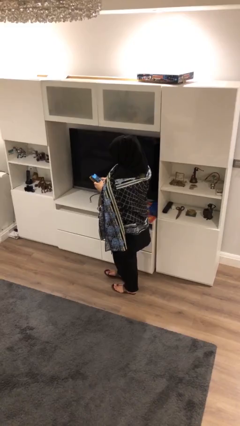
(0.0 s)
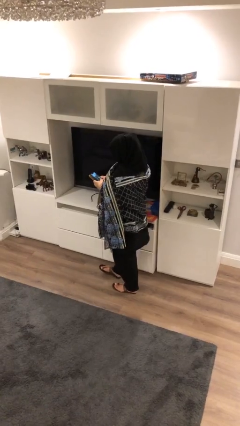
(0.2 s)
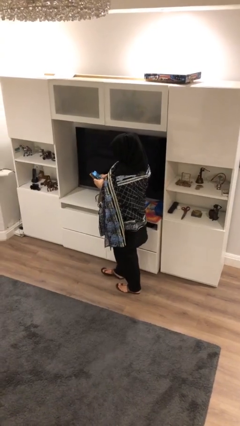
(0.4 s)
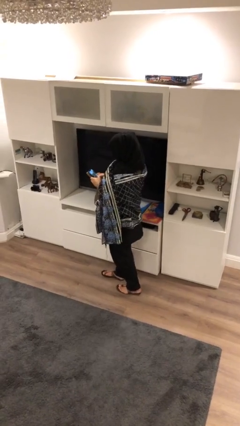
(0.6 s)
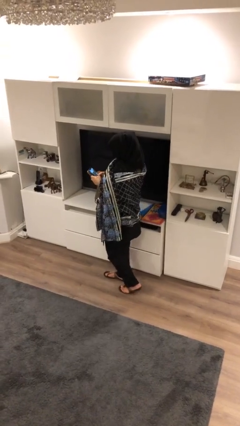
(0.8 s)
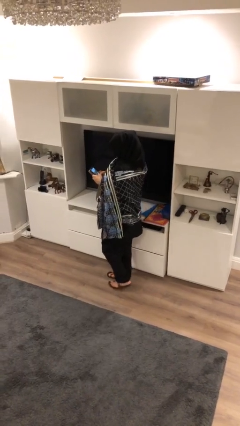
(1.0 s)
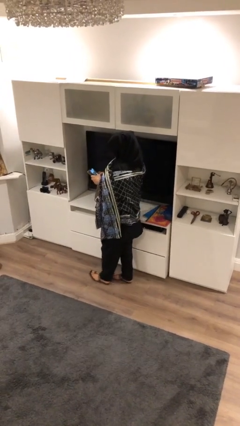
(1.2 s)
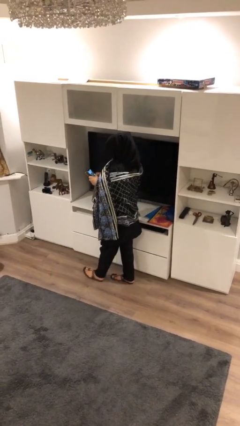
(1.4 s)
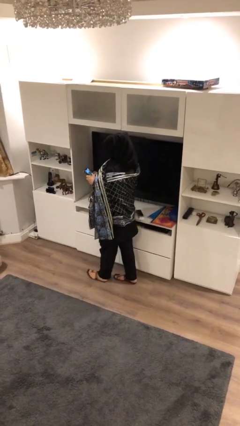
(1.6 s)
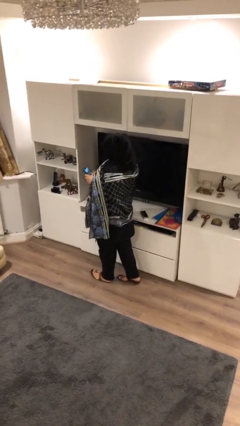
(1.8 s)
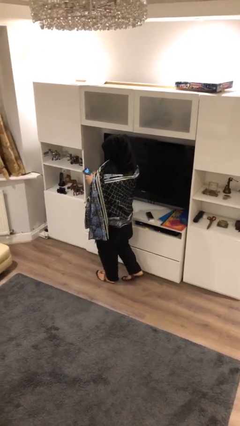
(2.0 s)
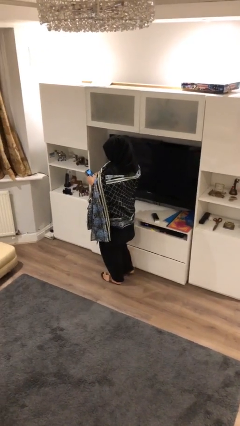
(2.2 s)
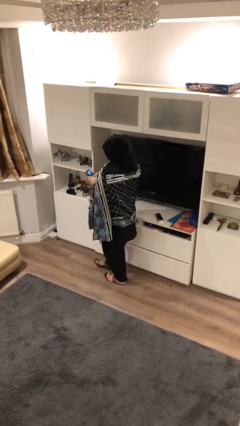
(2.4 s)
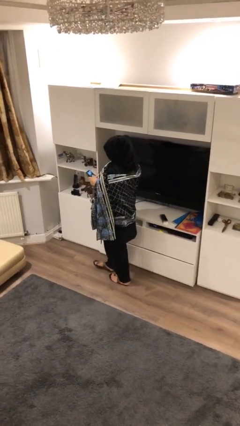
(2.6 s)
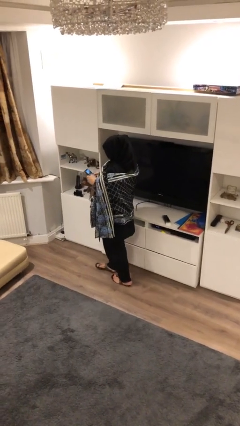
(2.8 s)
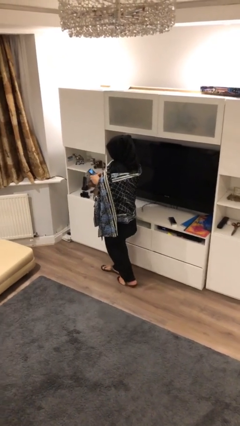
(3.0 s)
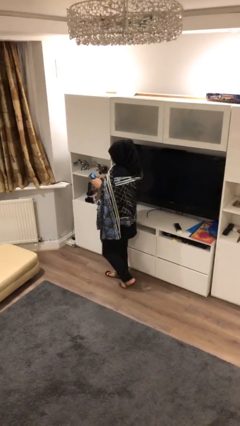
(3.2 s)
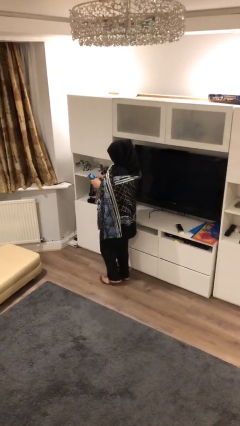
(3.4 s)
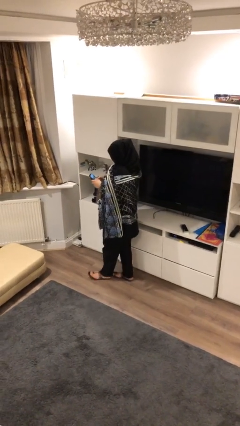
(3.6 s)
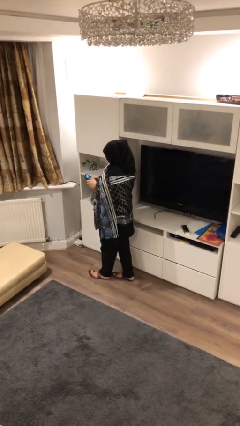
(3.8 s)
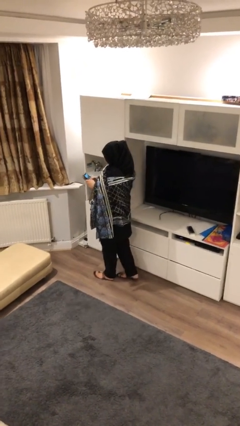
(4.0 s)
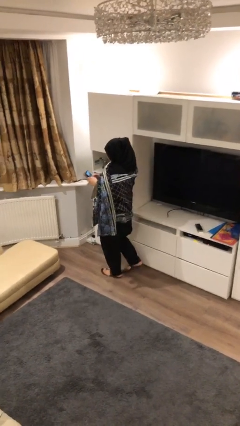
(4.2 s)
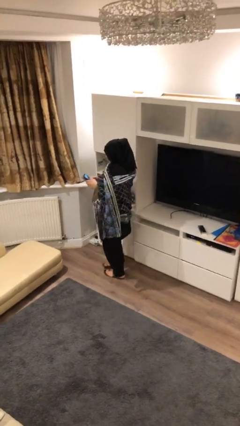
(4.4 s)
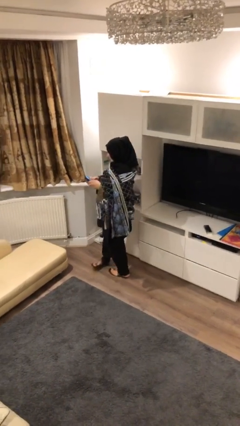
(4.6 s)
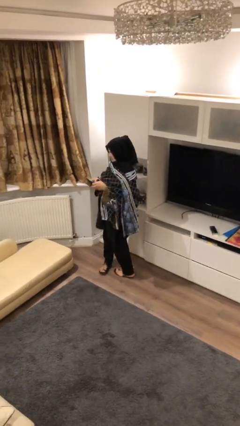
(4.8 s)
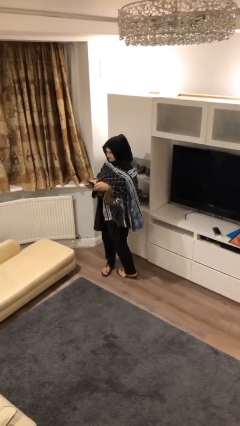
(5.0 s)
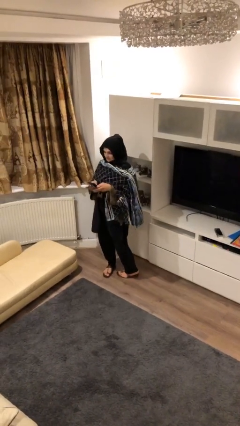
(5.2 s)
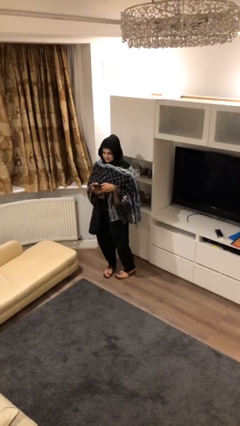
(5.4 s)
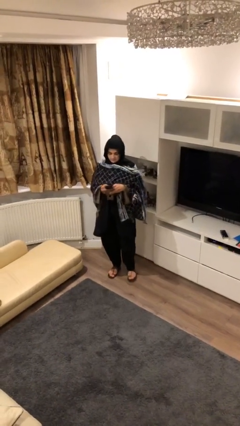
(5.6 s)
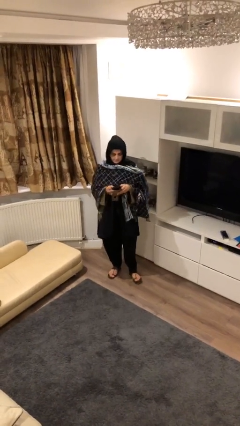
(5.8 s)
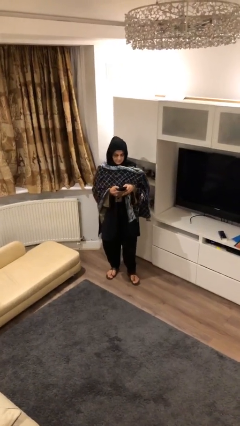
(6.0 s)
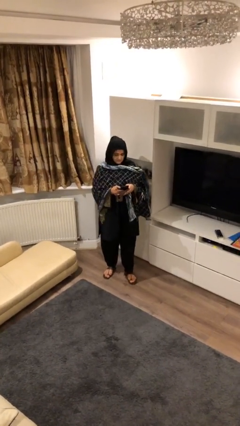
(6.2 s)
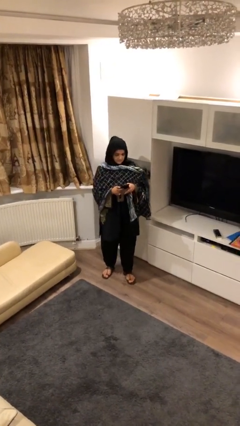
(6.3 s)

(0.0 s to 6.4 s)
person texts on phone

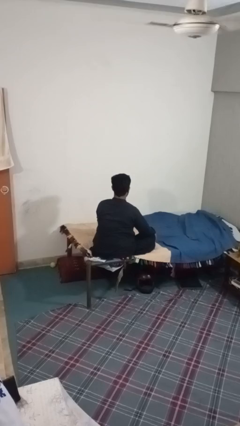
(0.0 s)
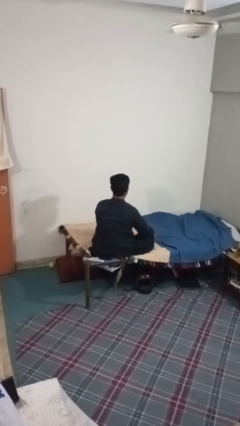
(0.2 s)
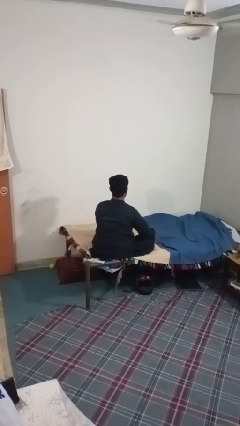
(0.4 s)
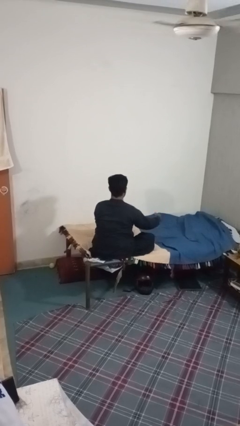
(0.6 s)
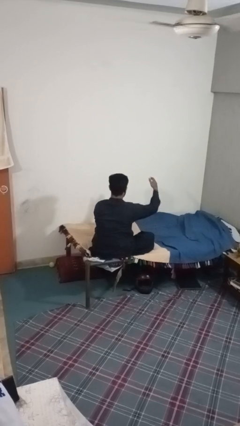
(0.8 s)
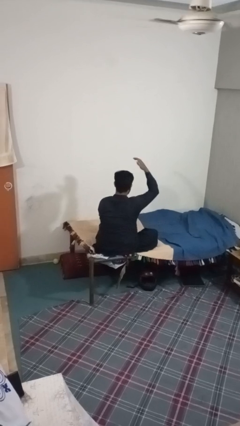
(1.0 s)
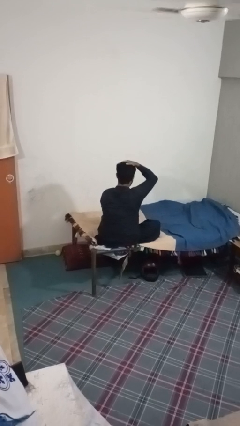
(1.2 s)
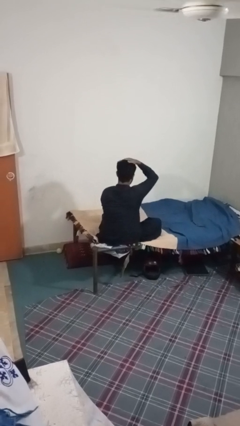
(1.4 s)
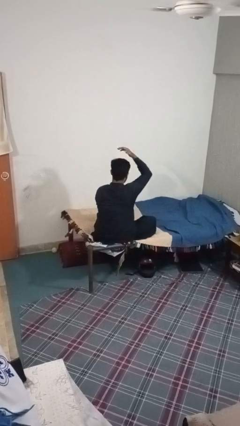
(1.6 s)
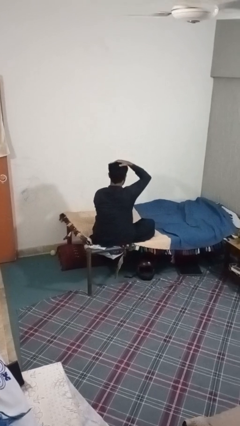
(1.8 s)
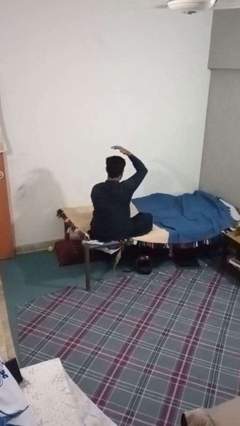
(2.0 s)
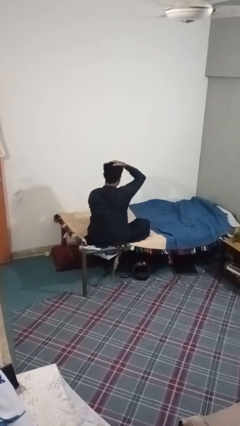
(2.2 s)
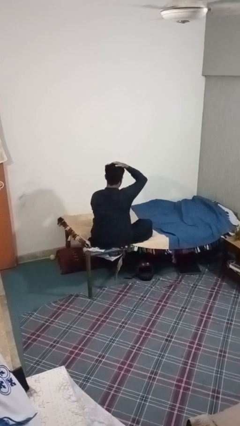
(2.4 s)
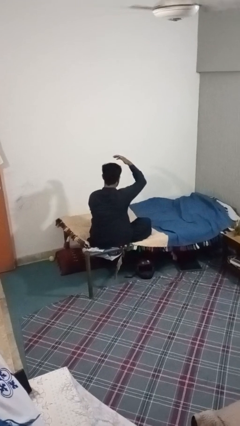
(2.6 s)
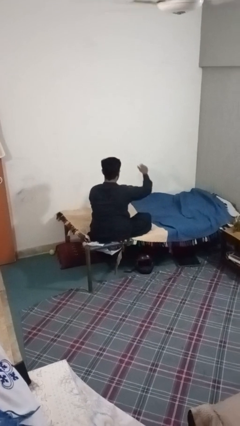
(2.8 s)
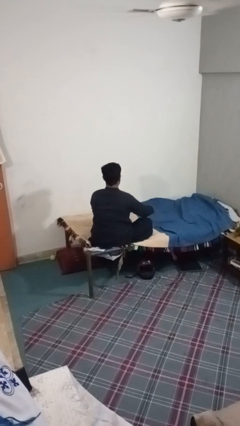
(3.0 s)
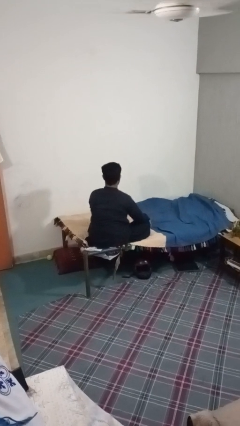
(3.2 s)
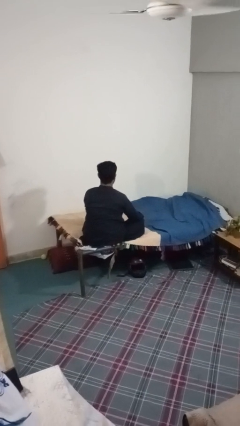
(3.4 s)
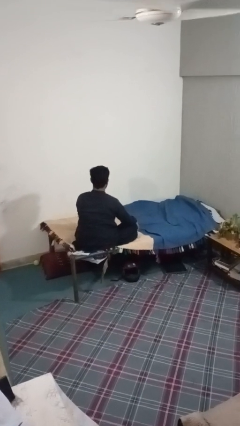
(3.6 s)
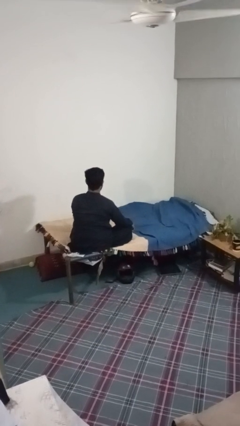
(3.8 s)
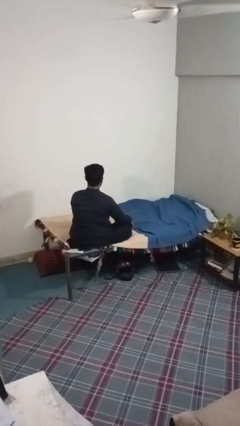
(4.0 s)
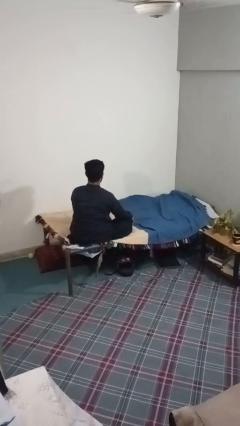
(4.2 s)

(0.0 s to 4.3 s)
person pats head

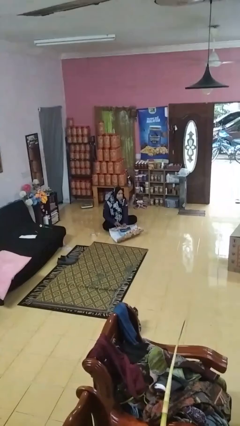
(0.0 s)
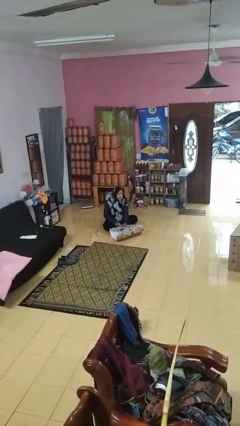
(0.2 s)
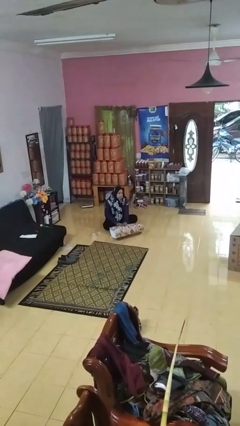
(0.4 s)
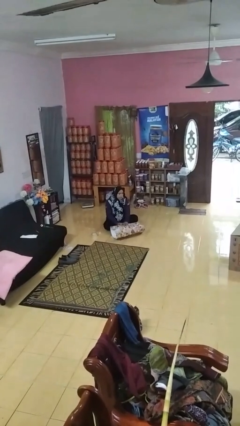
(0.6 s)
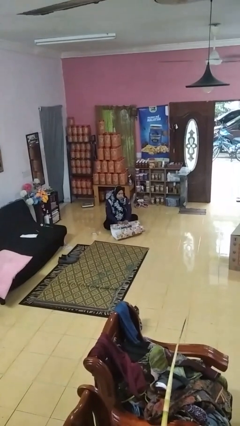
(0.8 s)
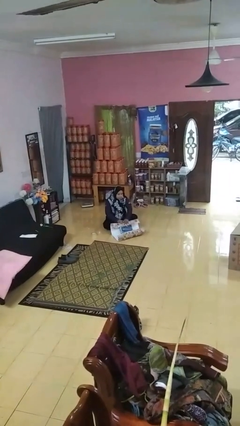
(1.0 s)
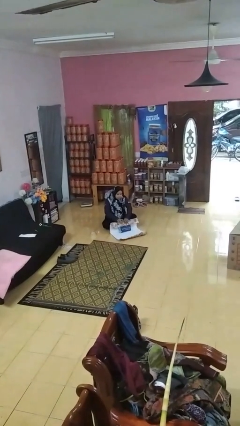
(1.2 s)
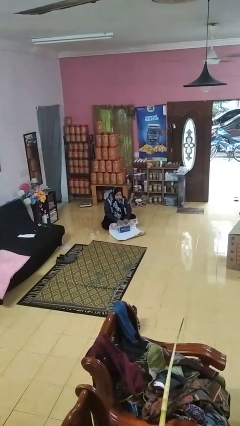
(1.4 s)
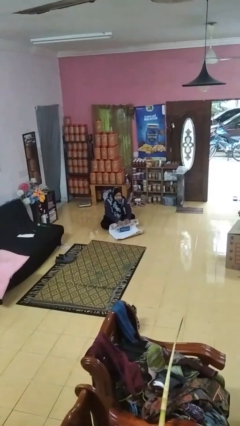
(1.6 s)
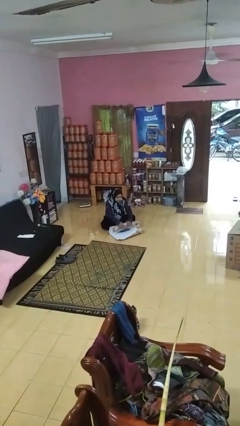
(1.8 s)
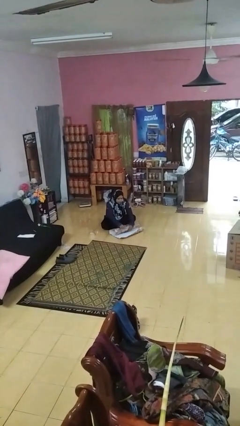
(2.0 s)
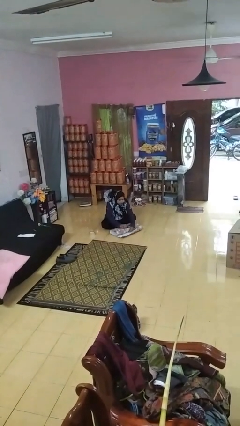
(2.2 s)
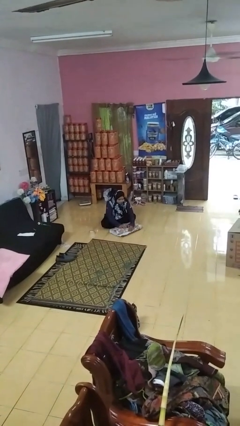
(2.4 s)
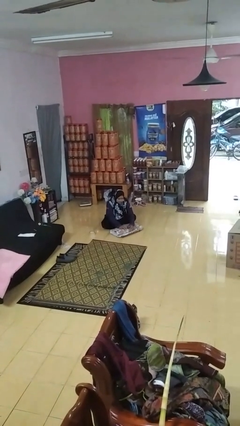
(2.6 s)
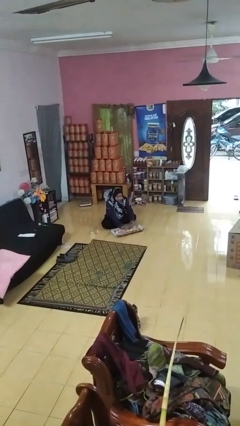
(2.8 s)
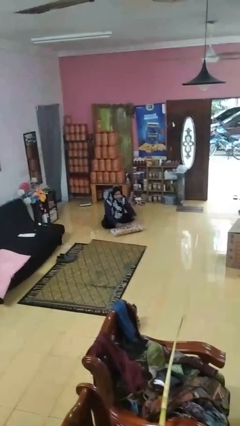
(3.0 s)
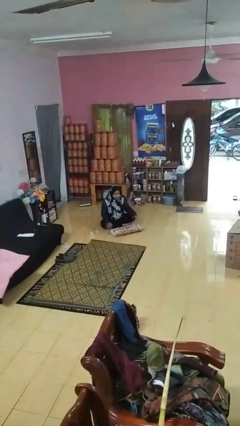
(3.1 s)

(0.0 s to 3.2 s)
person wraps box

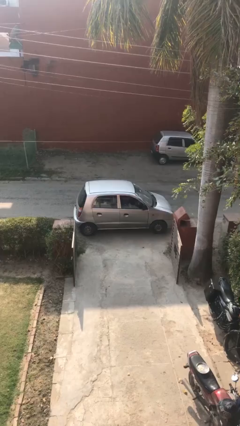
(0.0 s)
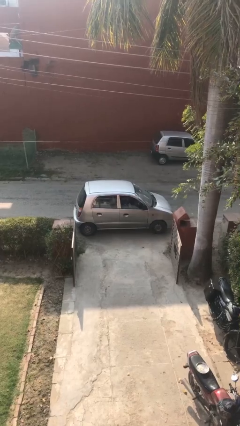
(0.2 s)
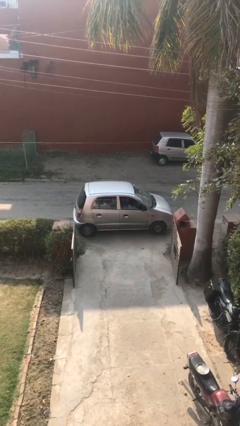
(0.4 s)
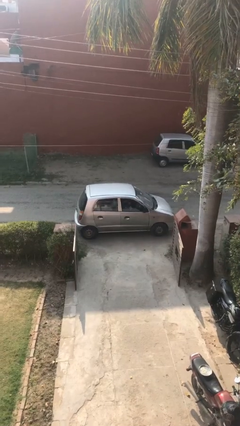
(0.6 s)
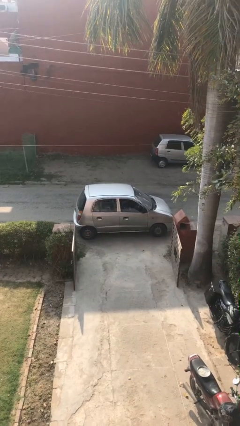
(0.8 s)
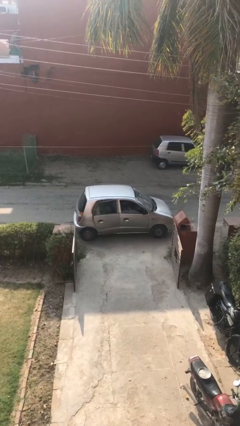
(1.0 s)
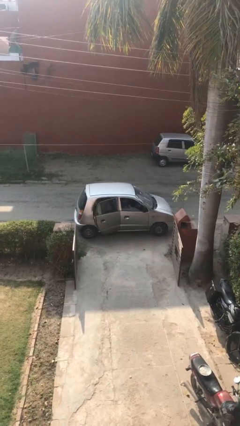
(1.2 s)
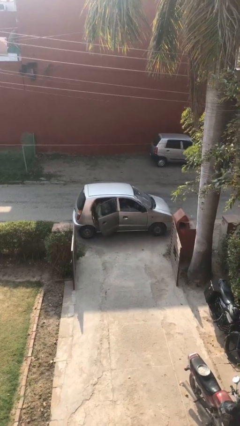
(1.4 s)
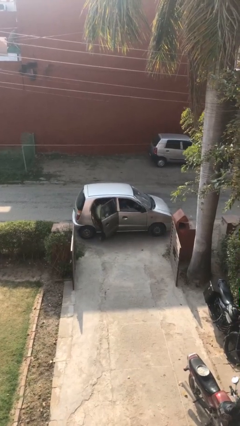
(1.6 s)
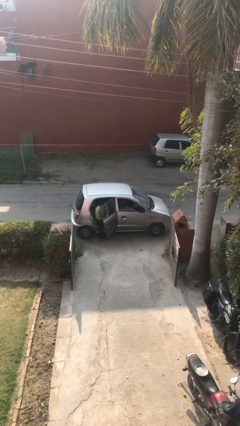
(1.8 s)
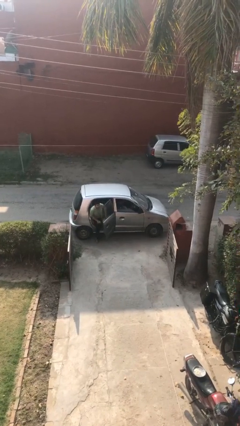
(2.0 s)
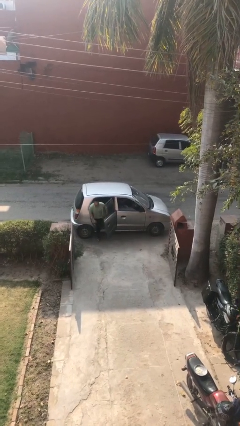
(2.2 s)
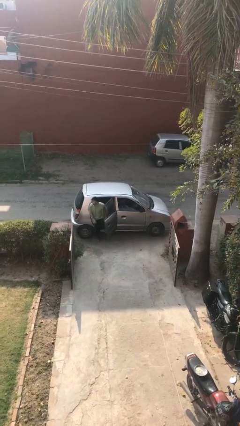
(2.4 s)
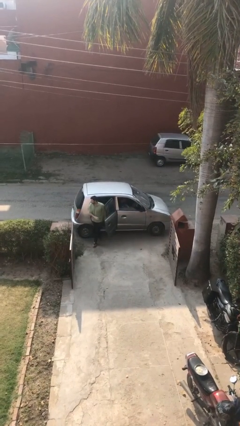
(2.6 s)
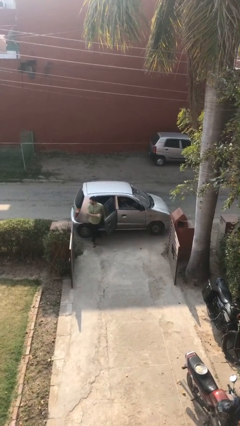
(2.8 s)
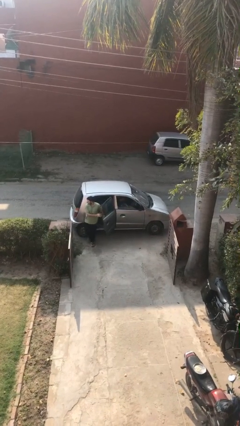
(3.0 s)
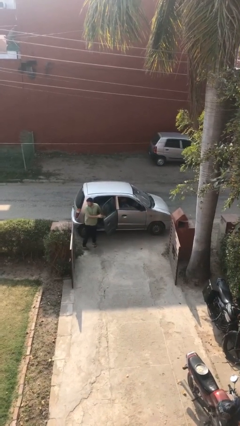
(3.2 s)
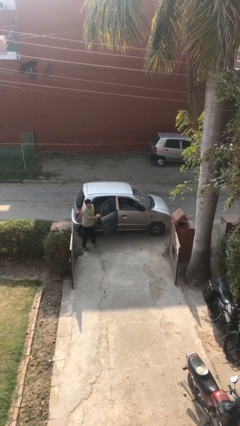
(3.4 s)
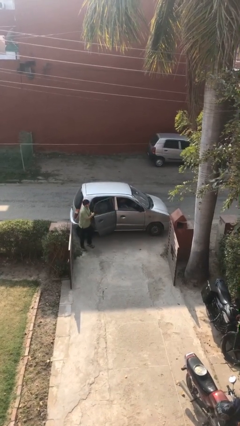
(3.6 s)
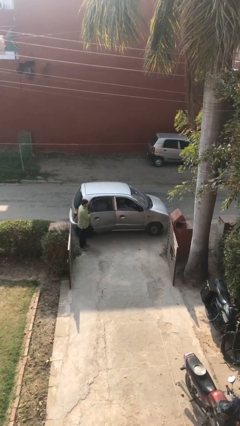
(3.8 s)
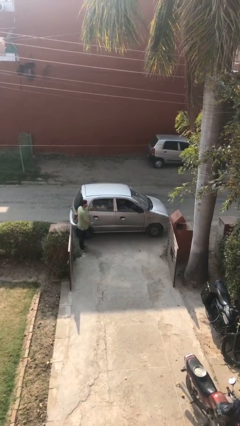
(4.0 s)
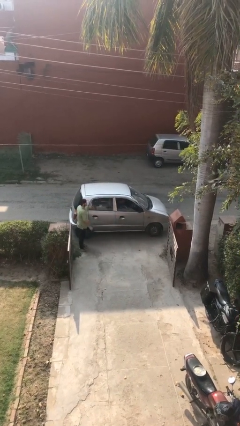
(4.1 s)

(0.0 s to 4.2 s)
car drops off person
